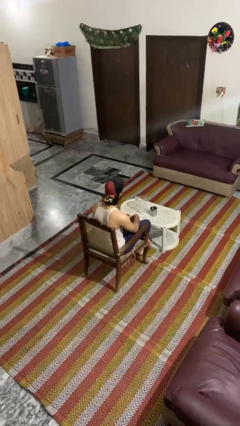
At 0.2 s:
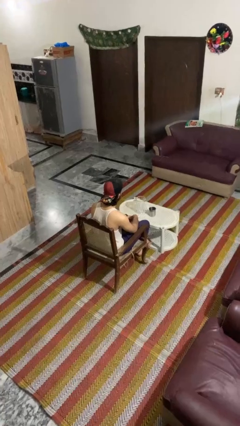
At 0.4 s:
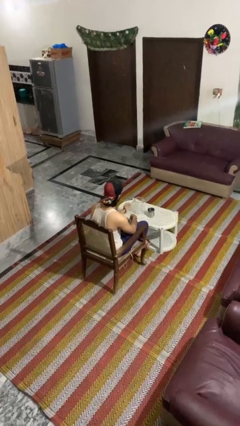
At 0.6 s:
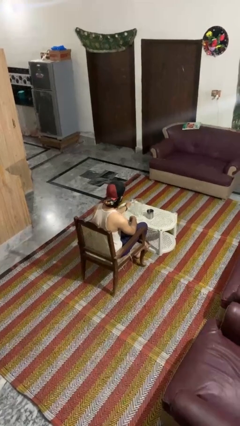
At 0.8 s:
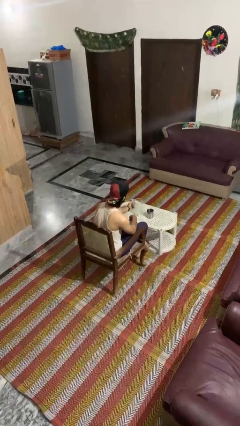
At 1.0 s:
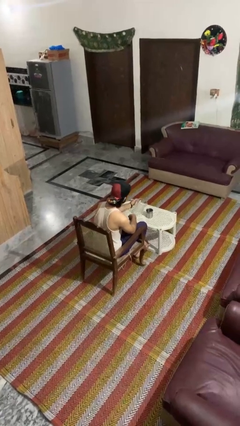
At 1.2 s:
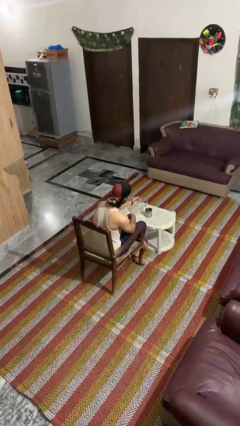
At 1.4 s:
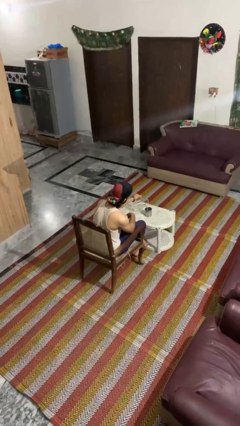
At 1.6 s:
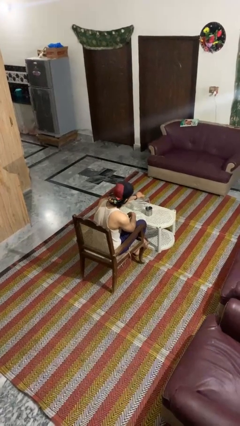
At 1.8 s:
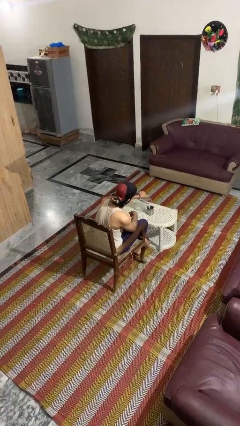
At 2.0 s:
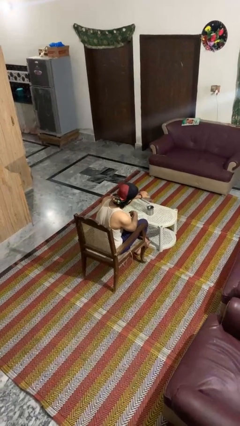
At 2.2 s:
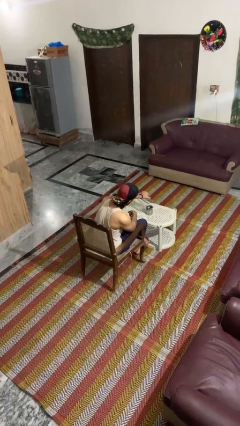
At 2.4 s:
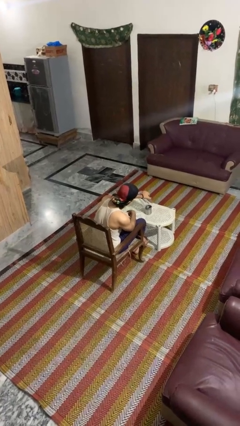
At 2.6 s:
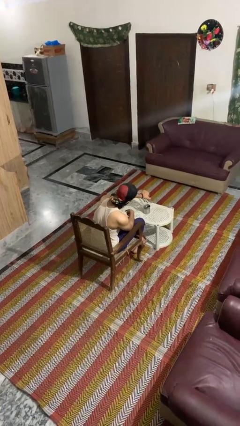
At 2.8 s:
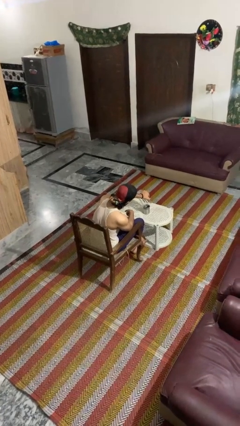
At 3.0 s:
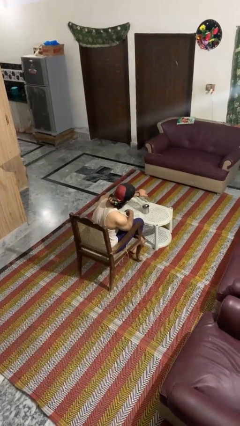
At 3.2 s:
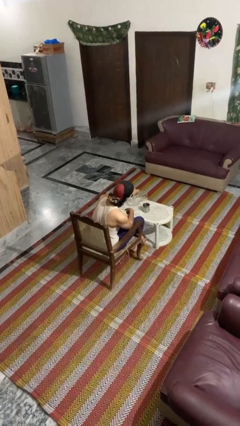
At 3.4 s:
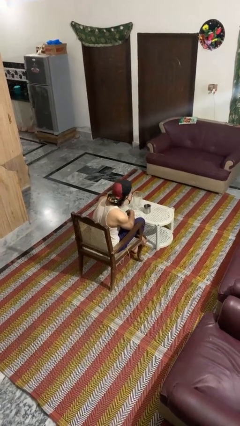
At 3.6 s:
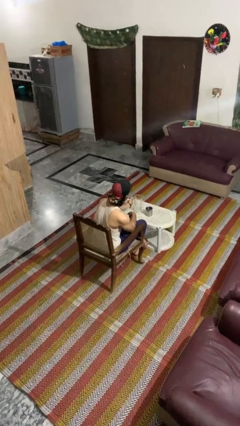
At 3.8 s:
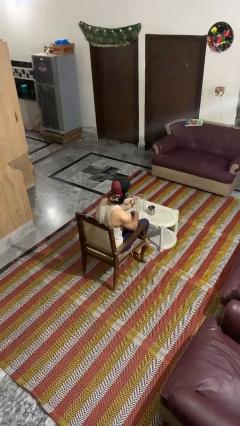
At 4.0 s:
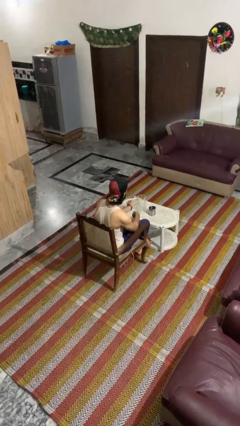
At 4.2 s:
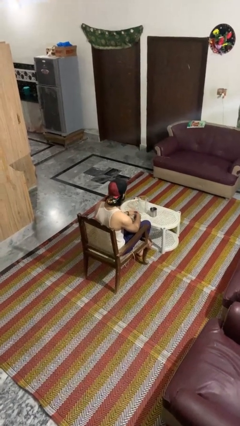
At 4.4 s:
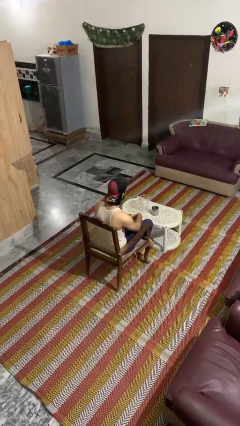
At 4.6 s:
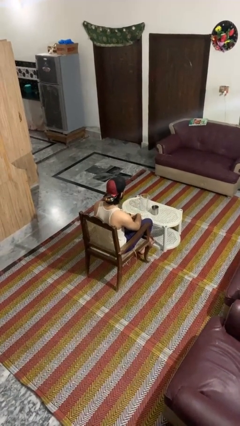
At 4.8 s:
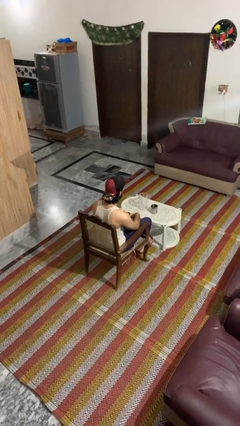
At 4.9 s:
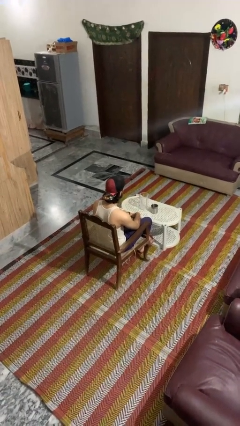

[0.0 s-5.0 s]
person pours coffee into mug

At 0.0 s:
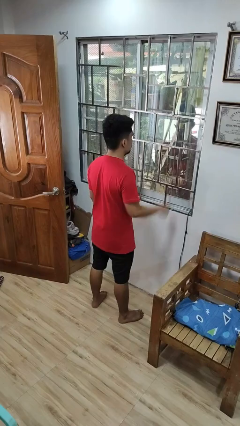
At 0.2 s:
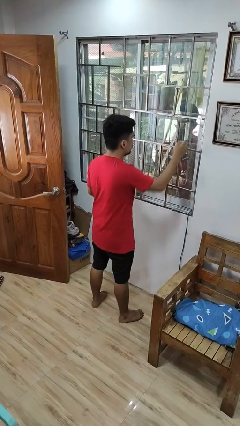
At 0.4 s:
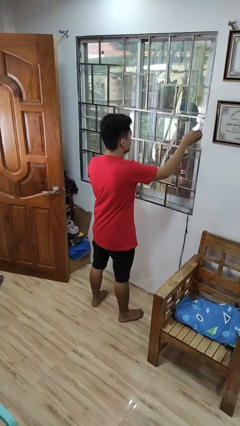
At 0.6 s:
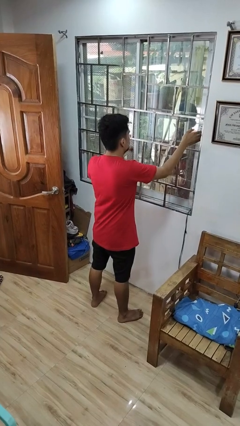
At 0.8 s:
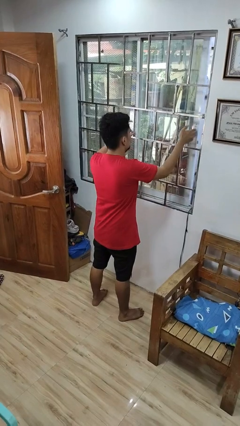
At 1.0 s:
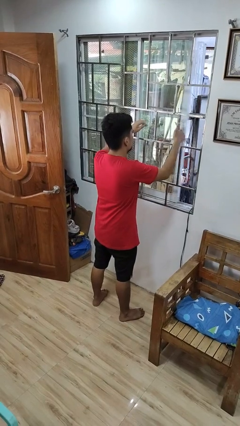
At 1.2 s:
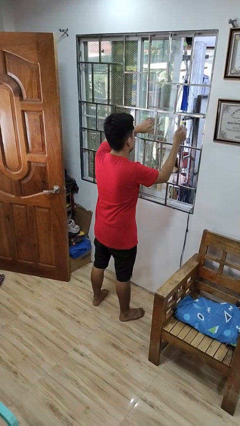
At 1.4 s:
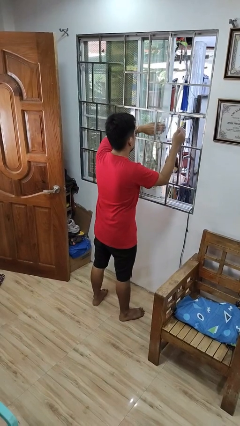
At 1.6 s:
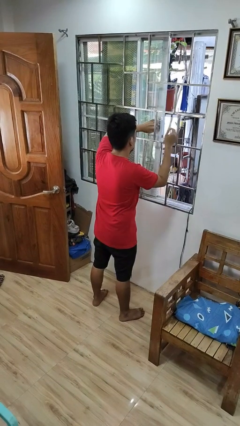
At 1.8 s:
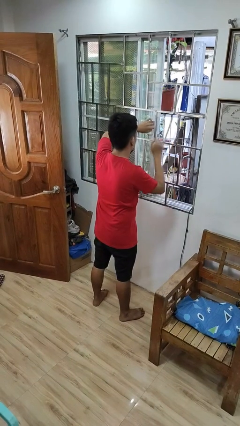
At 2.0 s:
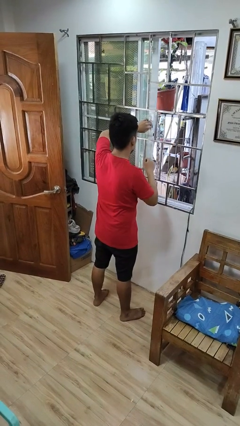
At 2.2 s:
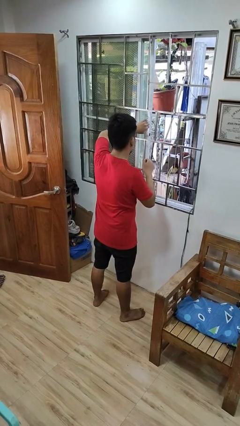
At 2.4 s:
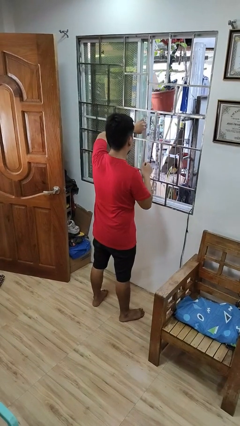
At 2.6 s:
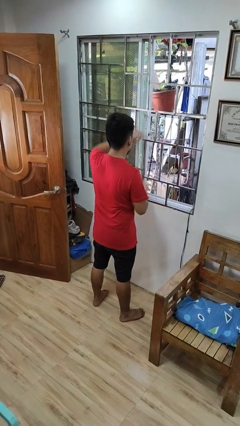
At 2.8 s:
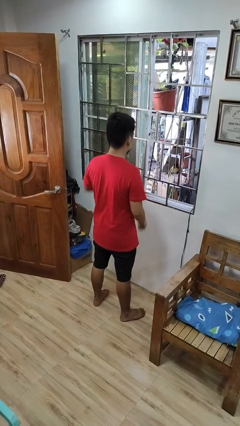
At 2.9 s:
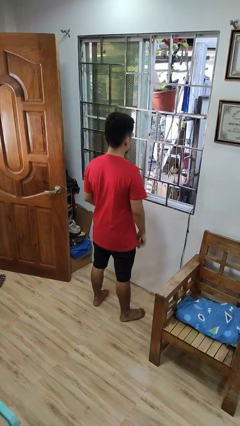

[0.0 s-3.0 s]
person opens home window

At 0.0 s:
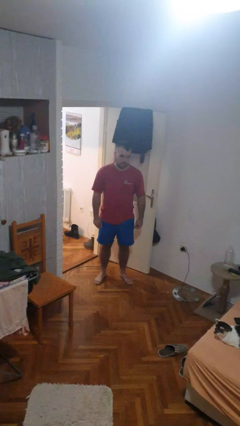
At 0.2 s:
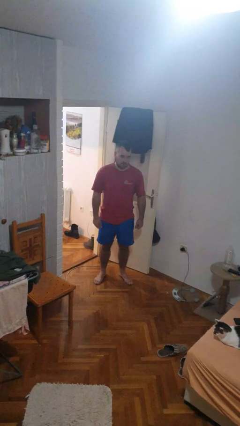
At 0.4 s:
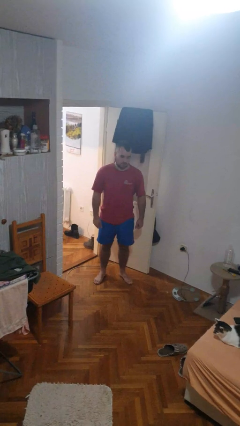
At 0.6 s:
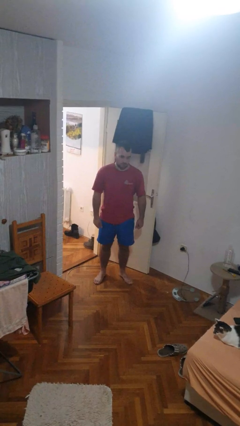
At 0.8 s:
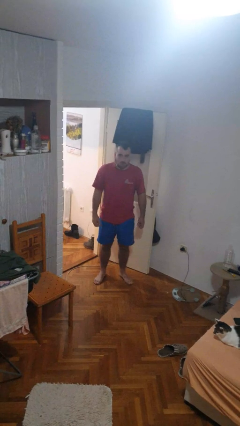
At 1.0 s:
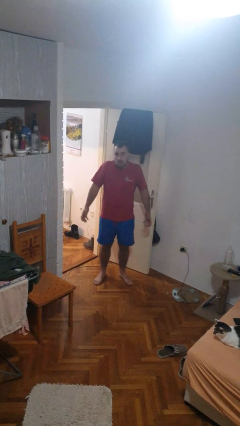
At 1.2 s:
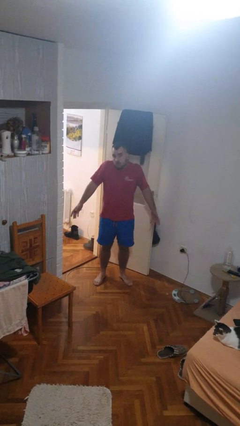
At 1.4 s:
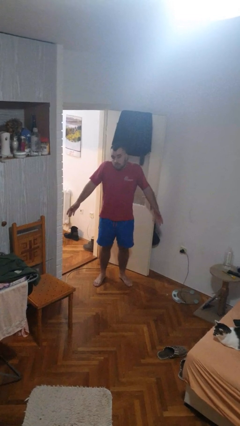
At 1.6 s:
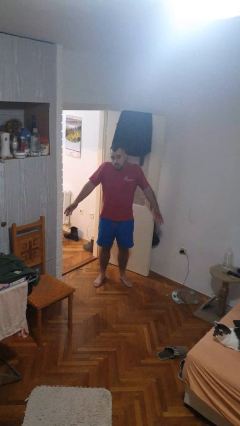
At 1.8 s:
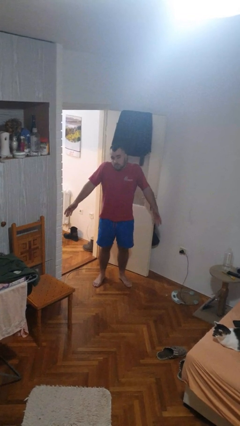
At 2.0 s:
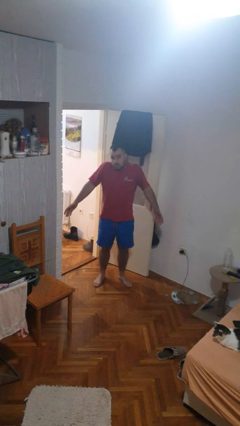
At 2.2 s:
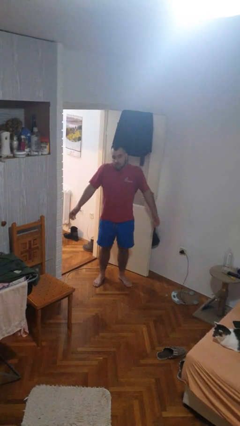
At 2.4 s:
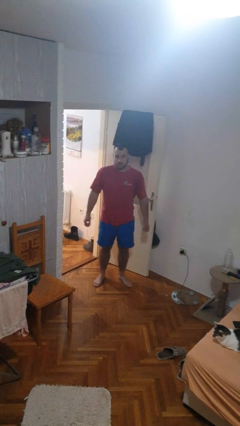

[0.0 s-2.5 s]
person shrugs

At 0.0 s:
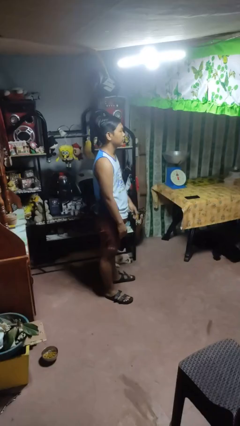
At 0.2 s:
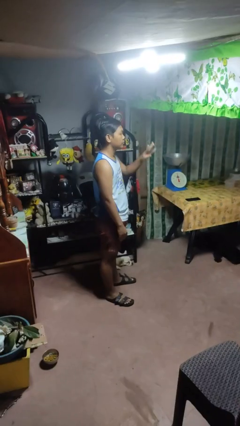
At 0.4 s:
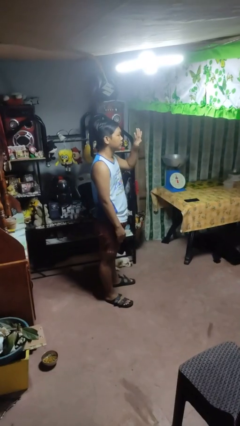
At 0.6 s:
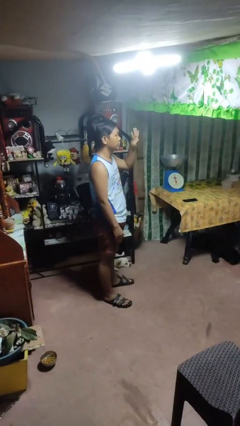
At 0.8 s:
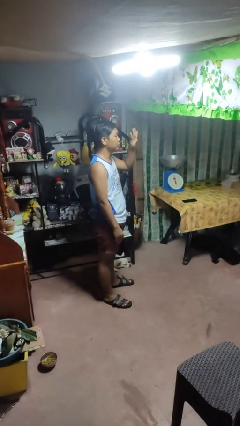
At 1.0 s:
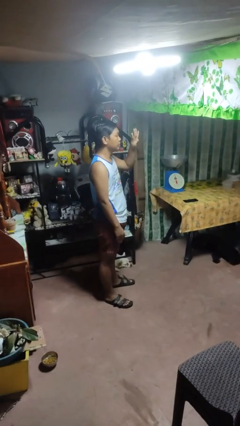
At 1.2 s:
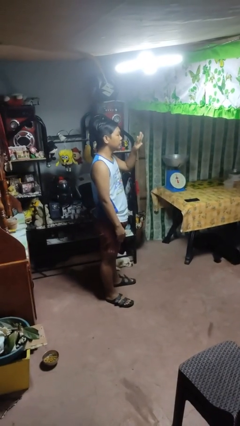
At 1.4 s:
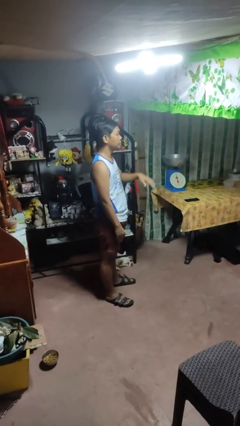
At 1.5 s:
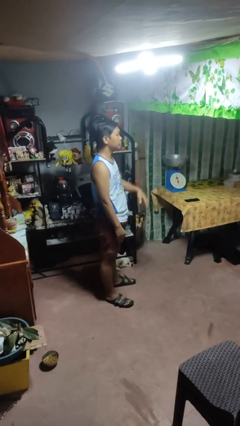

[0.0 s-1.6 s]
person gestures number four

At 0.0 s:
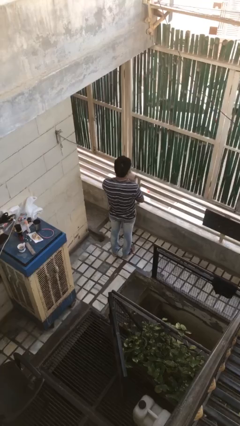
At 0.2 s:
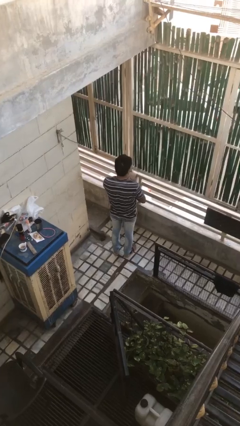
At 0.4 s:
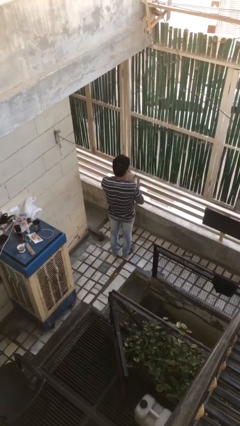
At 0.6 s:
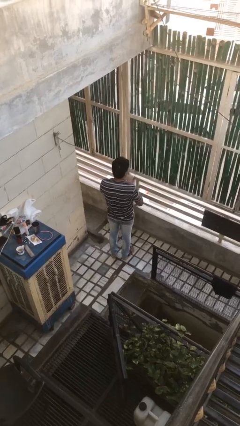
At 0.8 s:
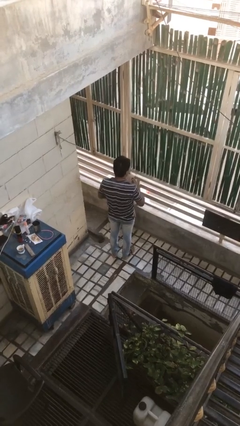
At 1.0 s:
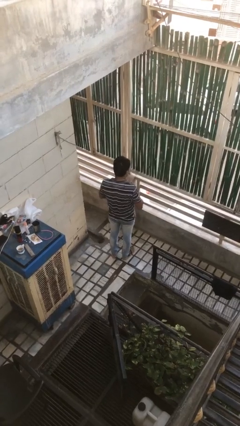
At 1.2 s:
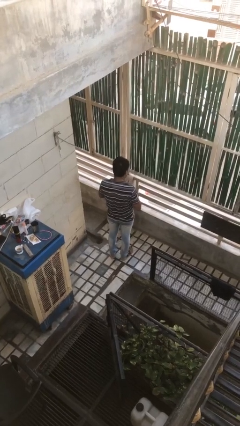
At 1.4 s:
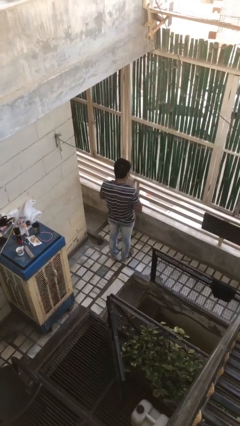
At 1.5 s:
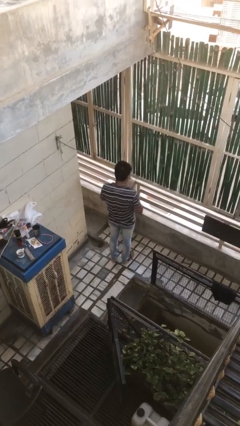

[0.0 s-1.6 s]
person takes off wristwatch

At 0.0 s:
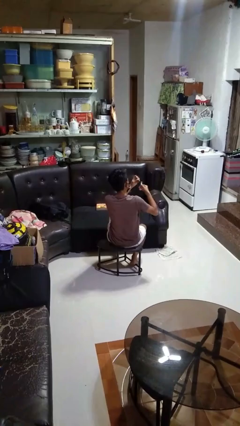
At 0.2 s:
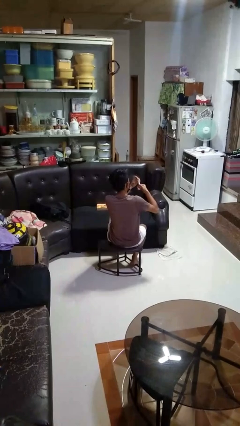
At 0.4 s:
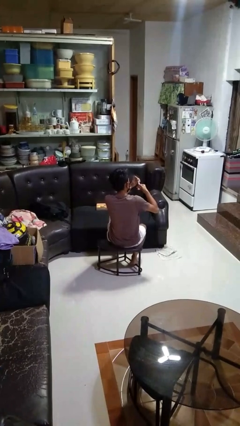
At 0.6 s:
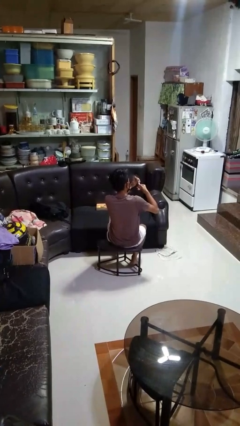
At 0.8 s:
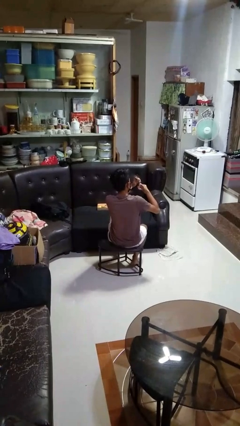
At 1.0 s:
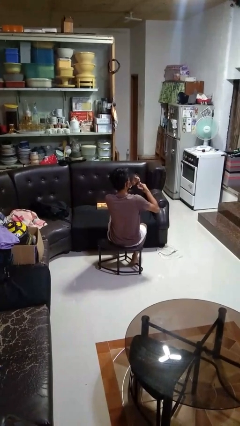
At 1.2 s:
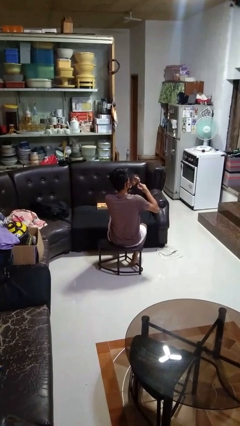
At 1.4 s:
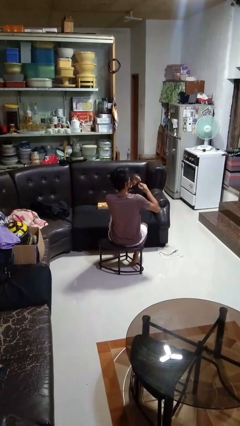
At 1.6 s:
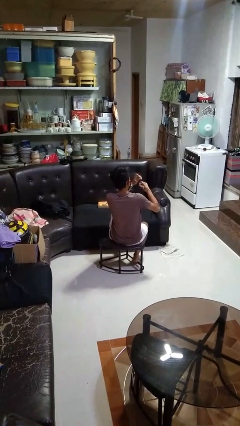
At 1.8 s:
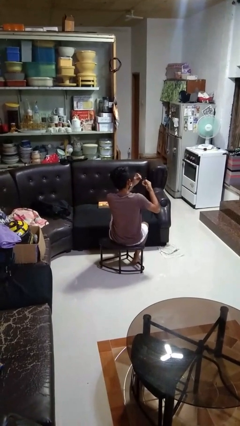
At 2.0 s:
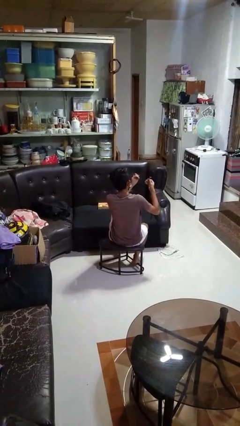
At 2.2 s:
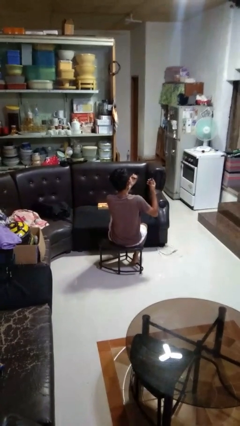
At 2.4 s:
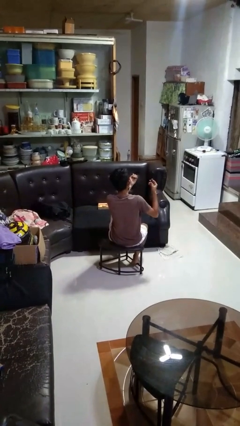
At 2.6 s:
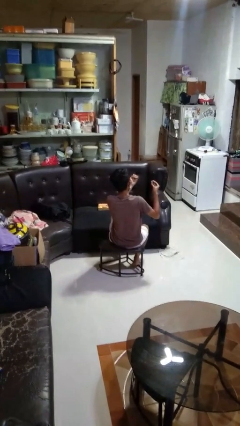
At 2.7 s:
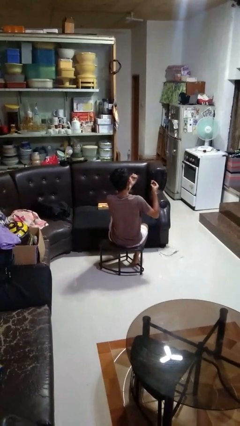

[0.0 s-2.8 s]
person clips fingernails

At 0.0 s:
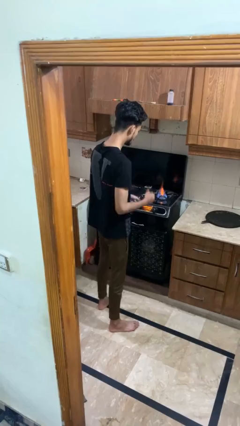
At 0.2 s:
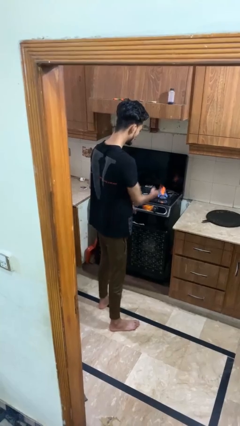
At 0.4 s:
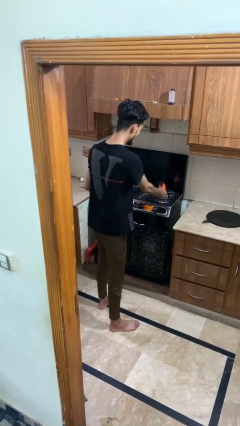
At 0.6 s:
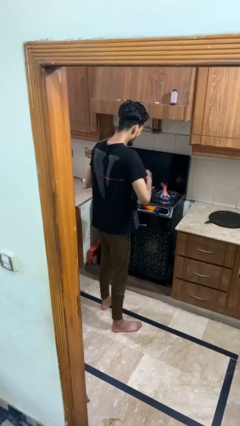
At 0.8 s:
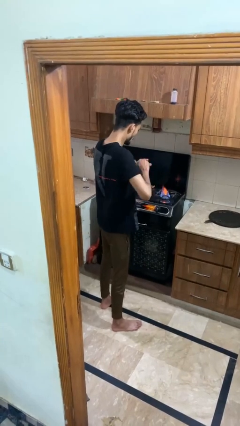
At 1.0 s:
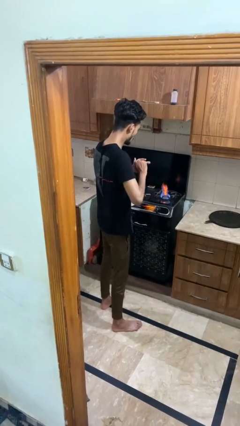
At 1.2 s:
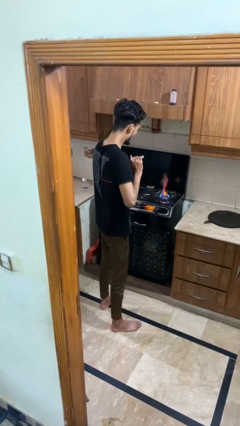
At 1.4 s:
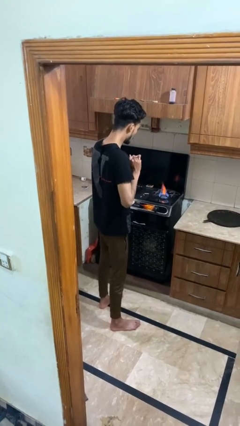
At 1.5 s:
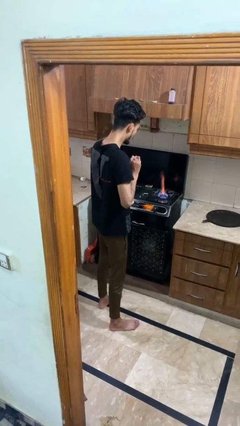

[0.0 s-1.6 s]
person burns hand
